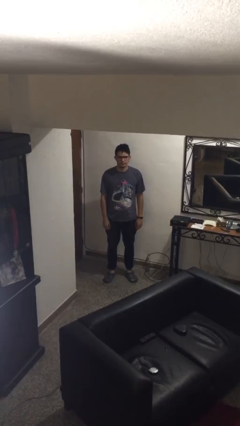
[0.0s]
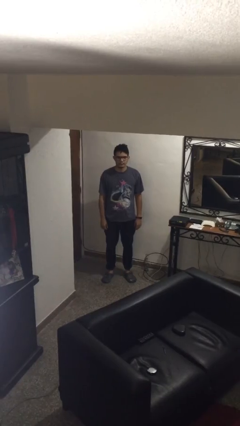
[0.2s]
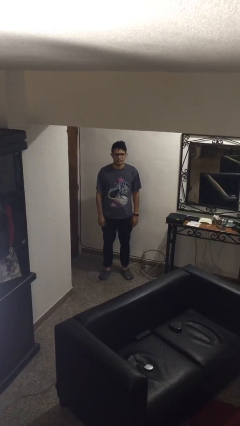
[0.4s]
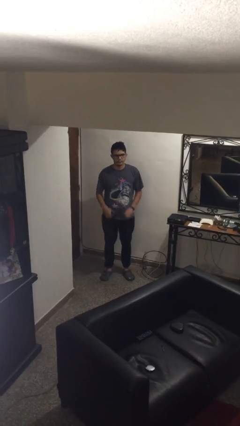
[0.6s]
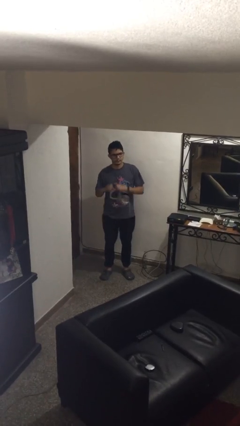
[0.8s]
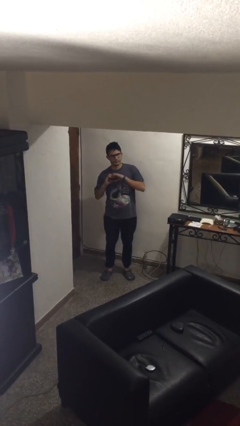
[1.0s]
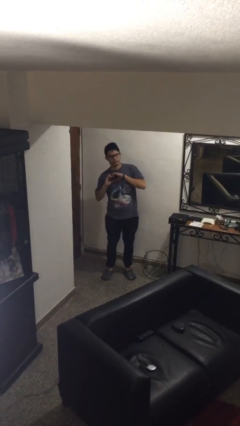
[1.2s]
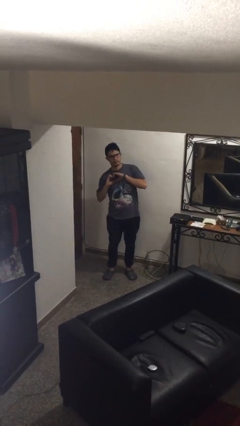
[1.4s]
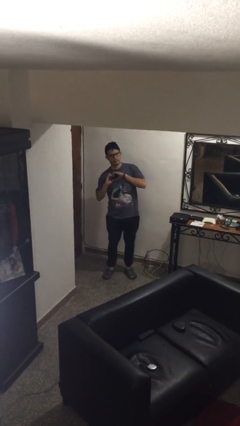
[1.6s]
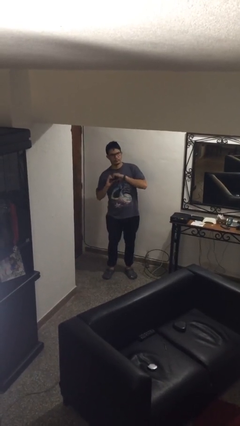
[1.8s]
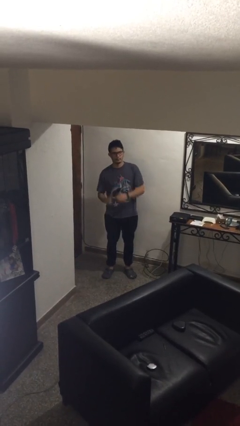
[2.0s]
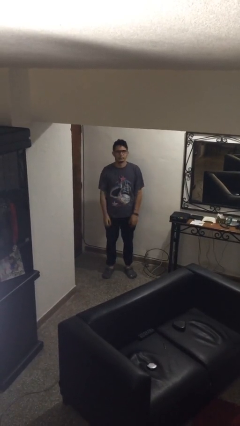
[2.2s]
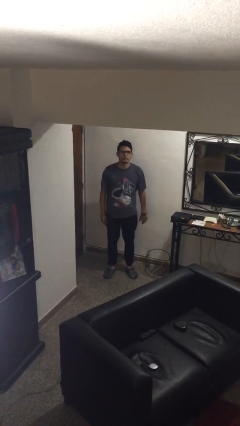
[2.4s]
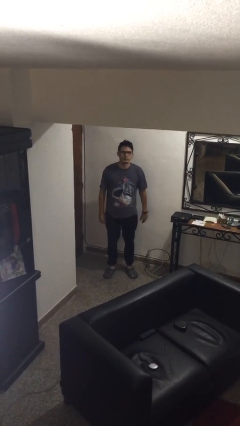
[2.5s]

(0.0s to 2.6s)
person gestures heart

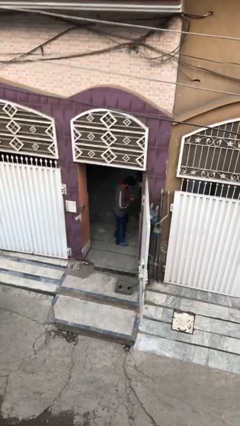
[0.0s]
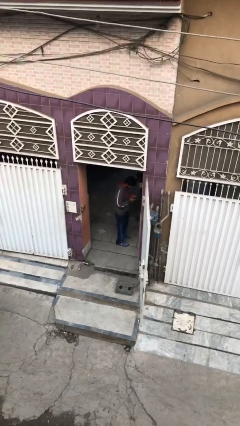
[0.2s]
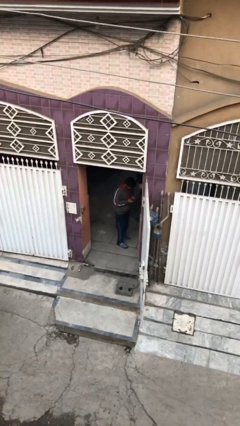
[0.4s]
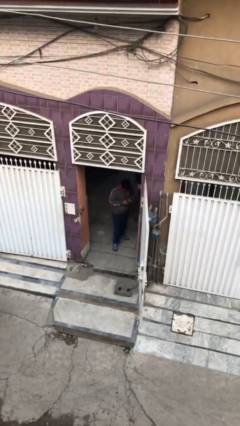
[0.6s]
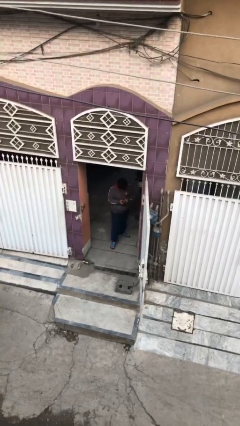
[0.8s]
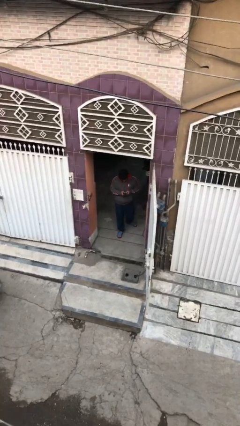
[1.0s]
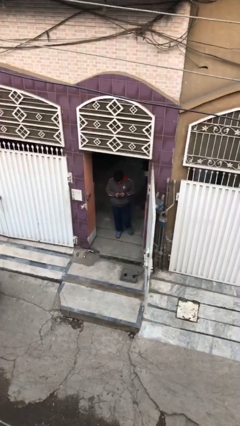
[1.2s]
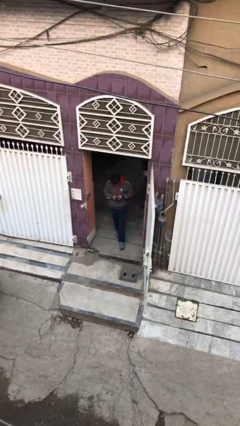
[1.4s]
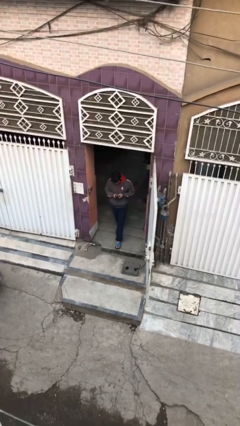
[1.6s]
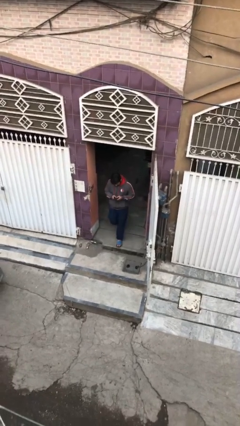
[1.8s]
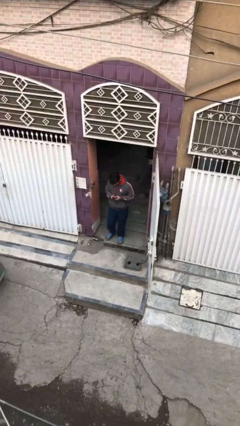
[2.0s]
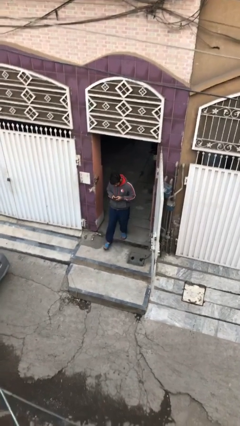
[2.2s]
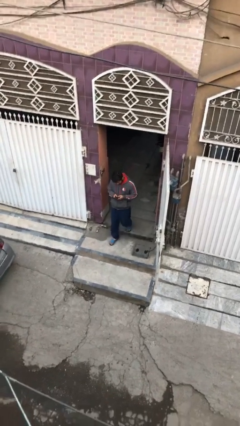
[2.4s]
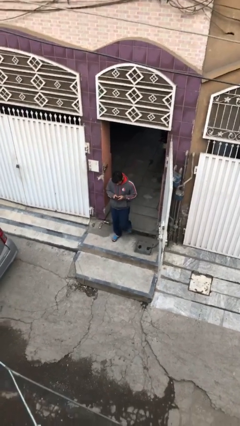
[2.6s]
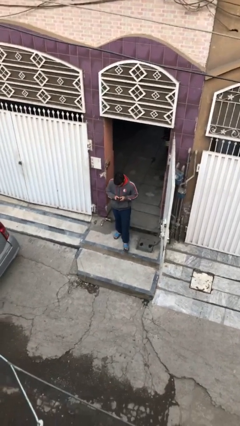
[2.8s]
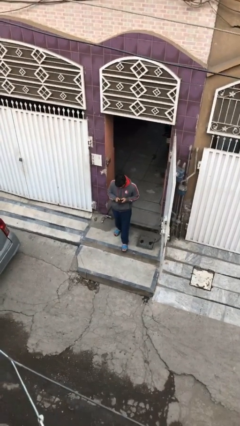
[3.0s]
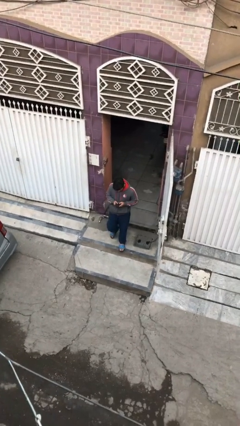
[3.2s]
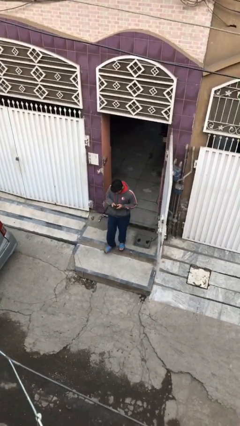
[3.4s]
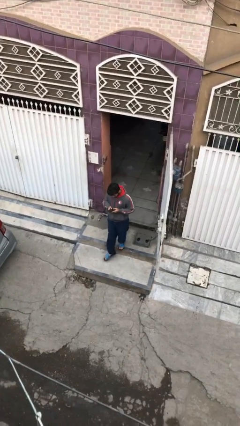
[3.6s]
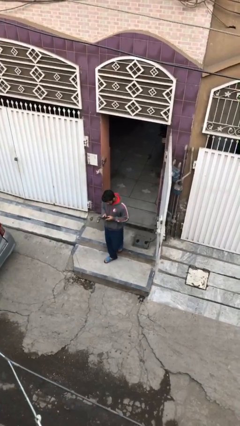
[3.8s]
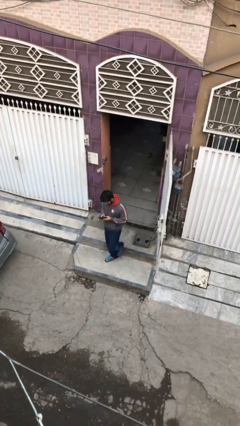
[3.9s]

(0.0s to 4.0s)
person enters scene through structure

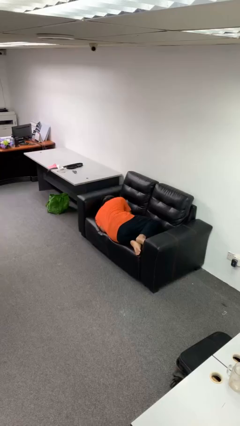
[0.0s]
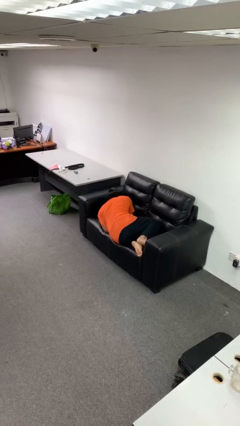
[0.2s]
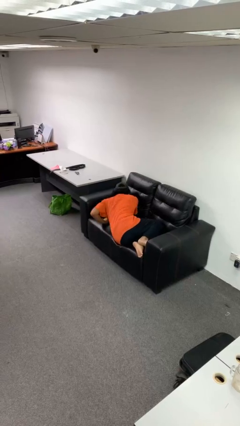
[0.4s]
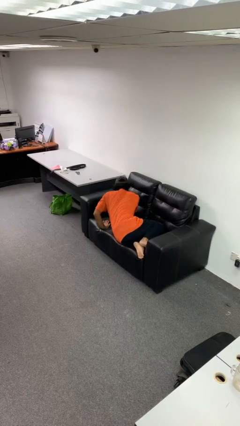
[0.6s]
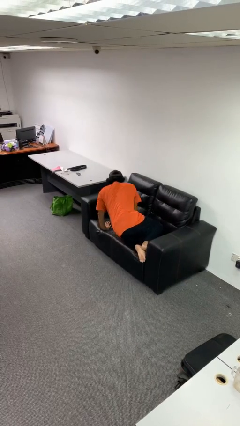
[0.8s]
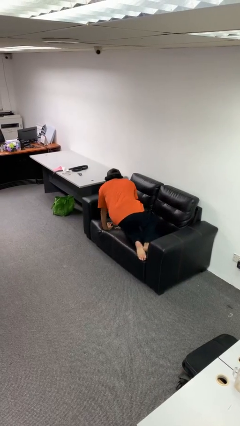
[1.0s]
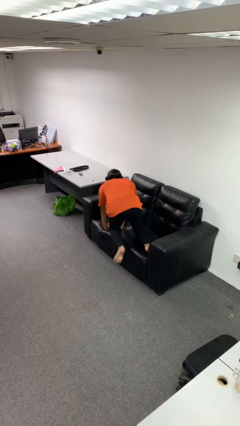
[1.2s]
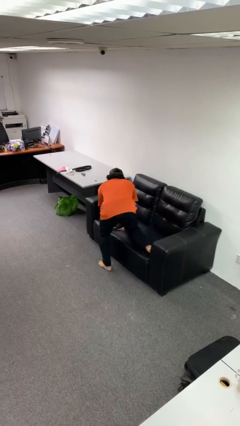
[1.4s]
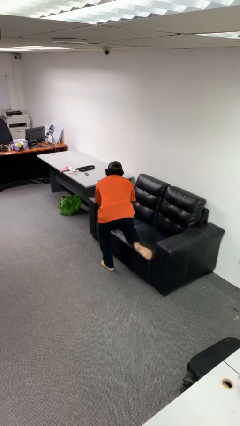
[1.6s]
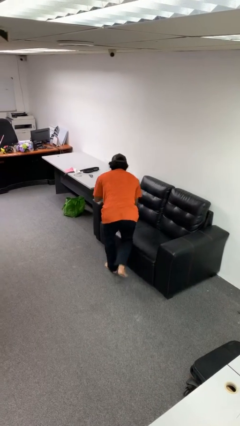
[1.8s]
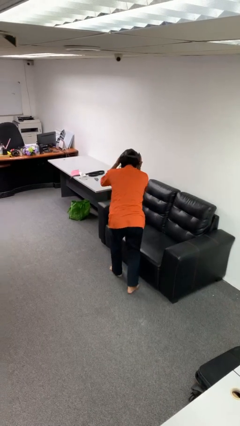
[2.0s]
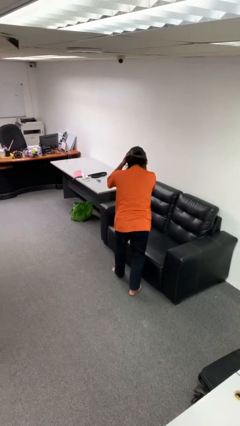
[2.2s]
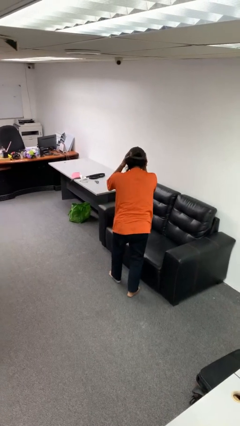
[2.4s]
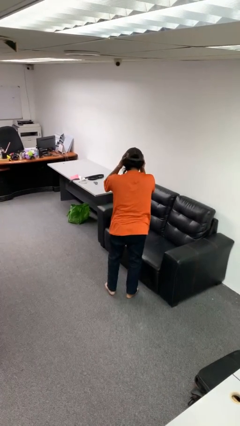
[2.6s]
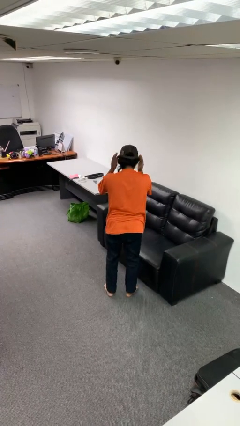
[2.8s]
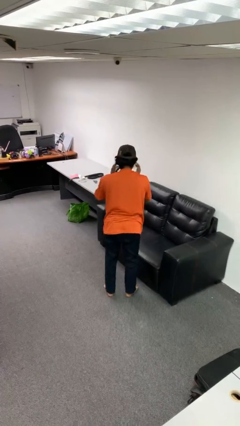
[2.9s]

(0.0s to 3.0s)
person stands up

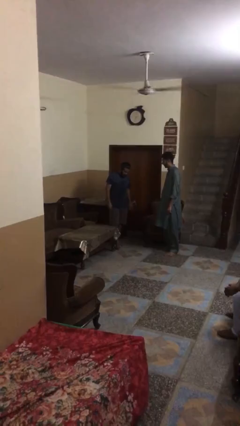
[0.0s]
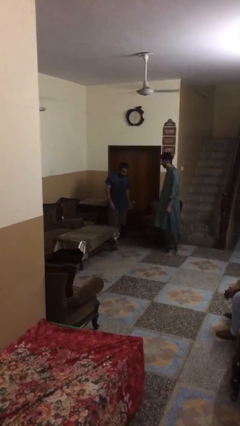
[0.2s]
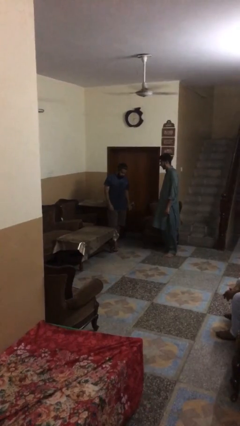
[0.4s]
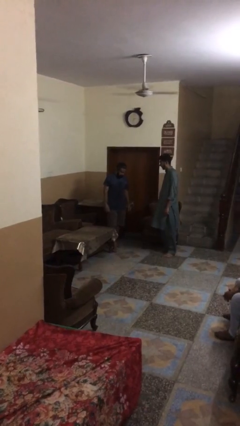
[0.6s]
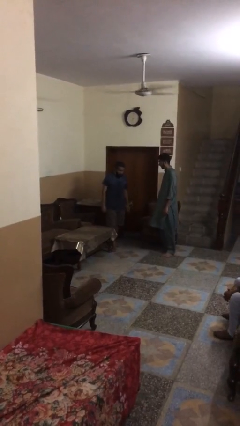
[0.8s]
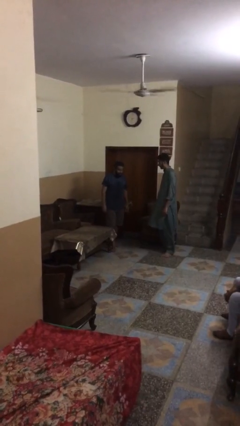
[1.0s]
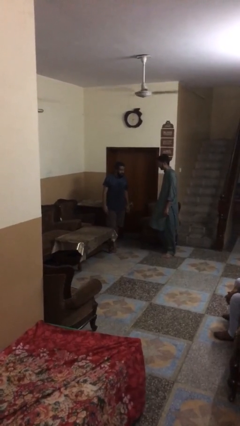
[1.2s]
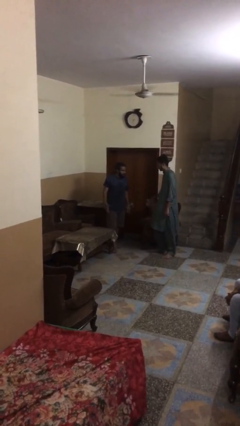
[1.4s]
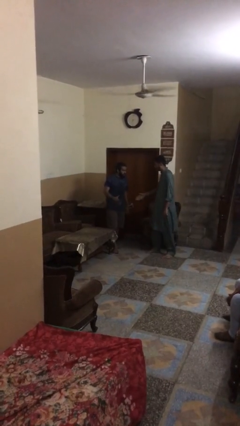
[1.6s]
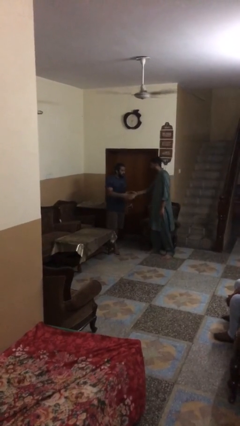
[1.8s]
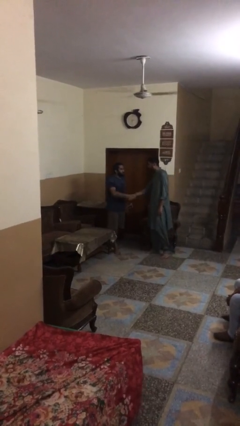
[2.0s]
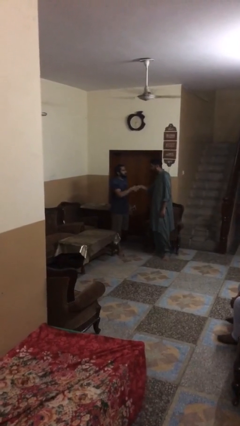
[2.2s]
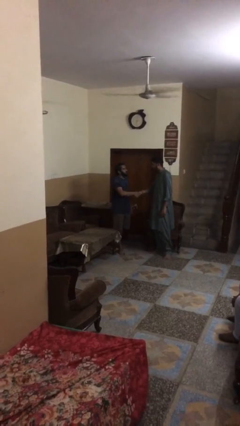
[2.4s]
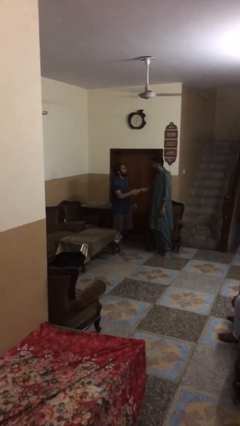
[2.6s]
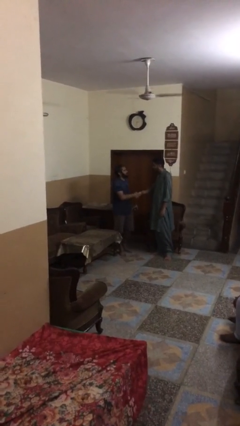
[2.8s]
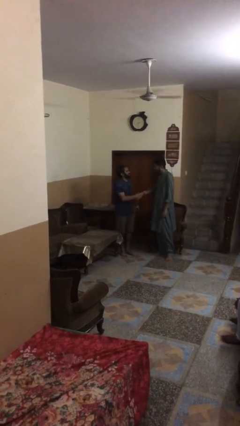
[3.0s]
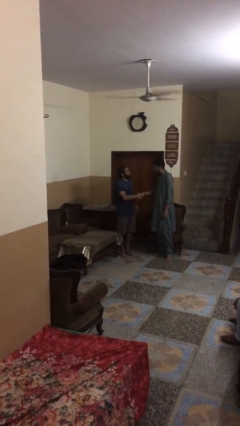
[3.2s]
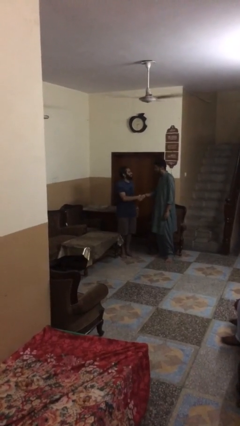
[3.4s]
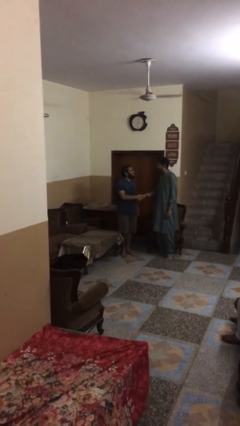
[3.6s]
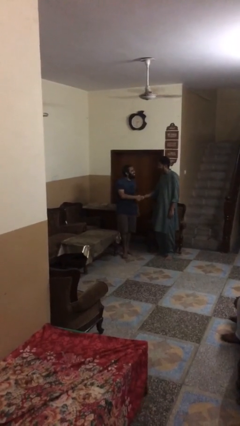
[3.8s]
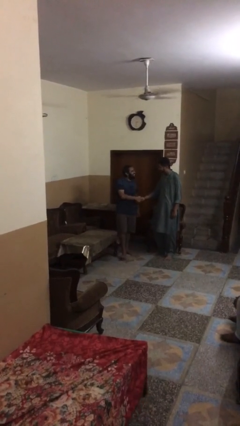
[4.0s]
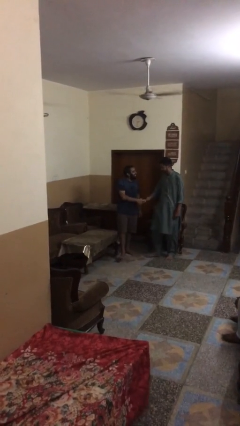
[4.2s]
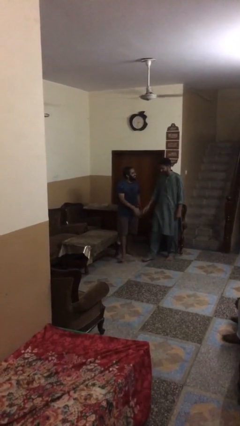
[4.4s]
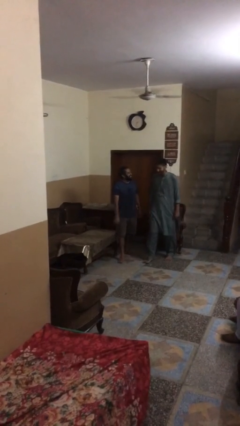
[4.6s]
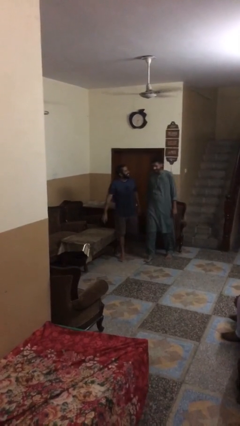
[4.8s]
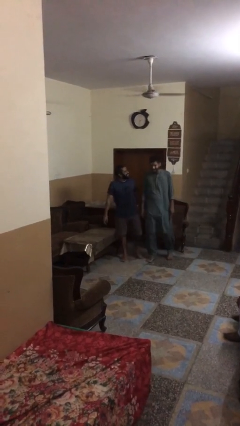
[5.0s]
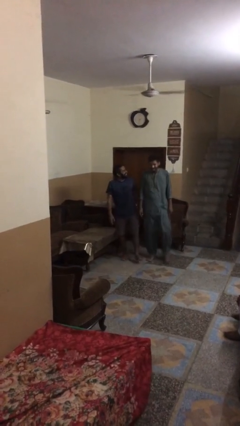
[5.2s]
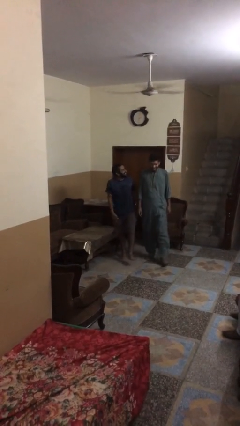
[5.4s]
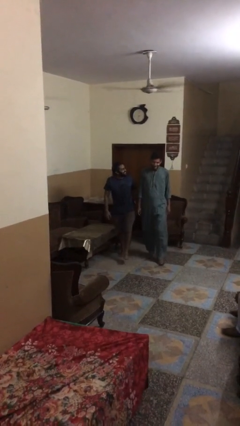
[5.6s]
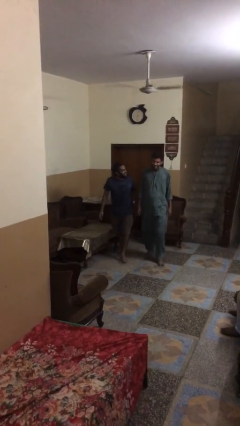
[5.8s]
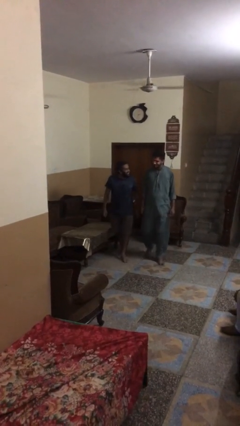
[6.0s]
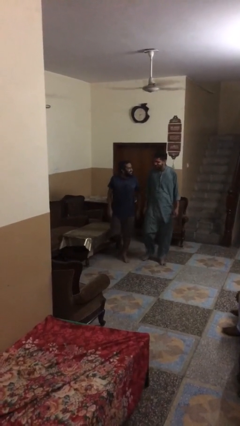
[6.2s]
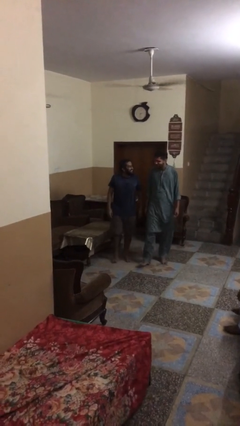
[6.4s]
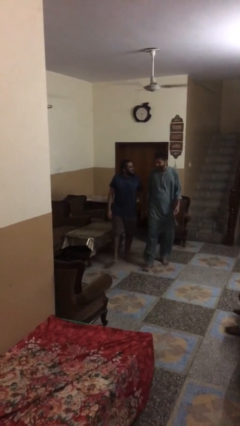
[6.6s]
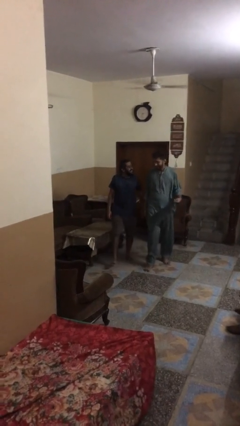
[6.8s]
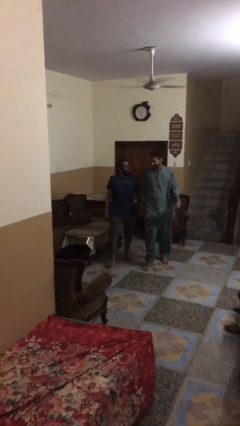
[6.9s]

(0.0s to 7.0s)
person shakes hand

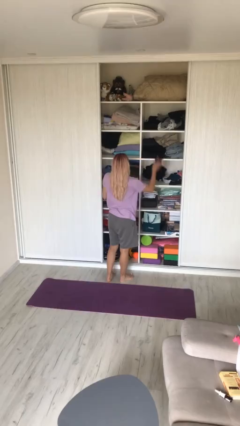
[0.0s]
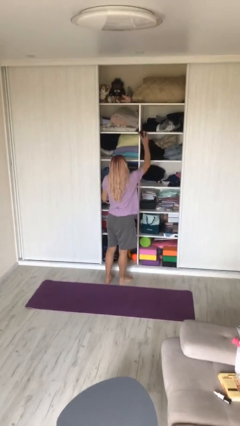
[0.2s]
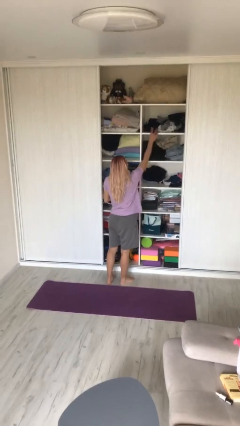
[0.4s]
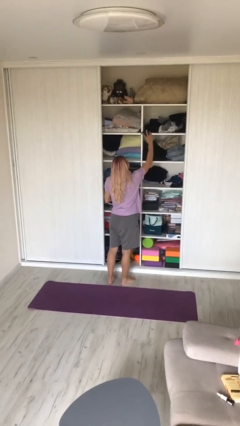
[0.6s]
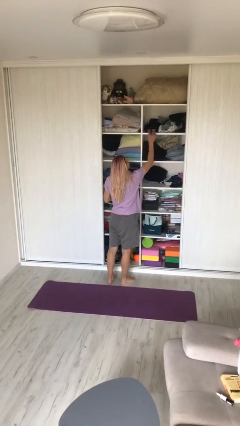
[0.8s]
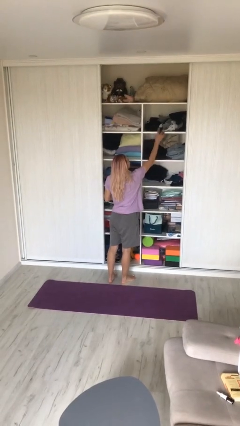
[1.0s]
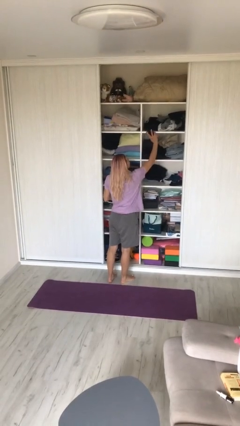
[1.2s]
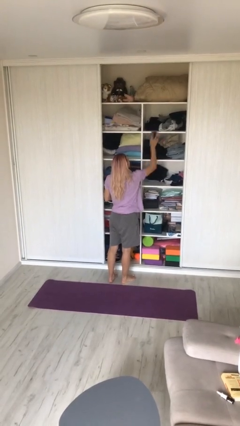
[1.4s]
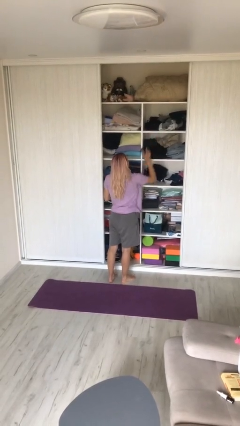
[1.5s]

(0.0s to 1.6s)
person dusts furniture
